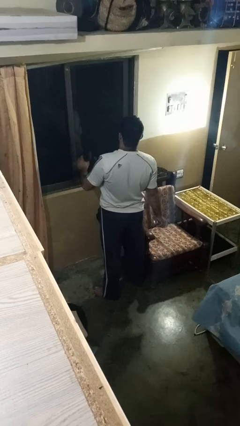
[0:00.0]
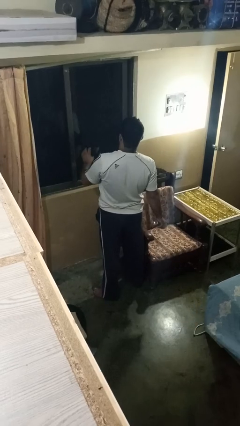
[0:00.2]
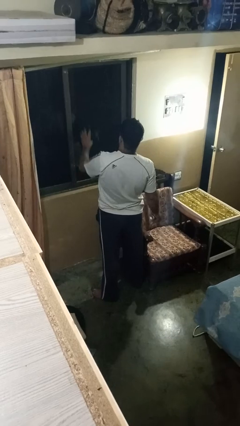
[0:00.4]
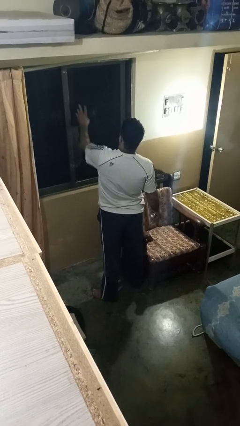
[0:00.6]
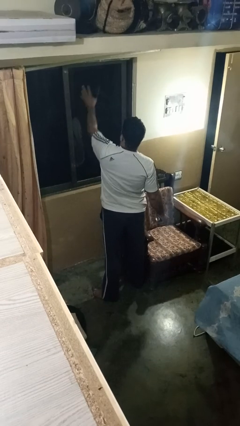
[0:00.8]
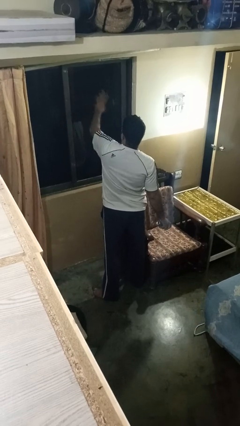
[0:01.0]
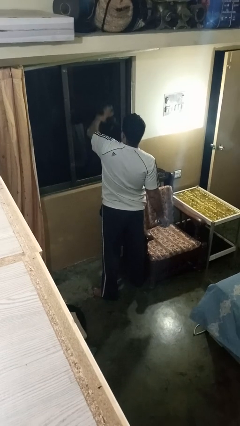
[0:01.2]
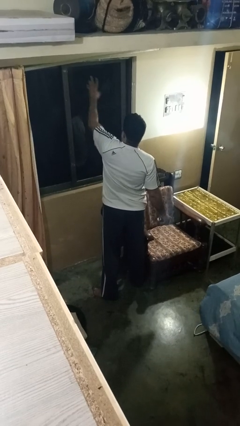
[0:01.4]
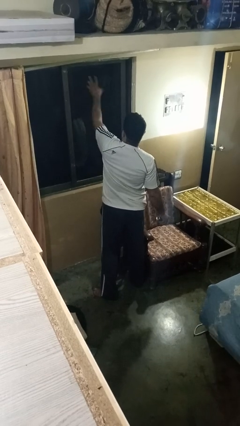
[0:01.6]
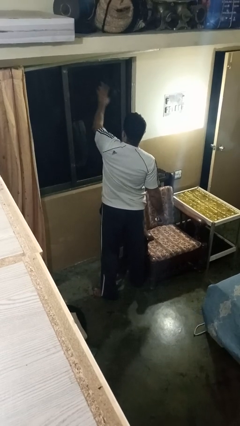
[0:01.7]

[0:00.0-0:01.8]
person washes window

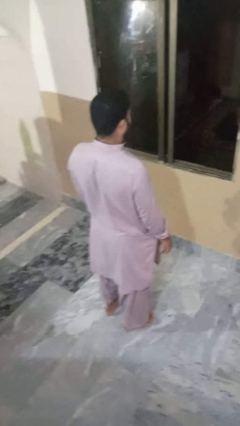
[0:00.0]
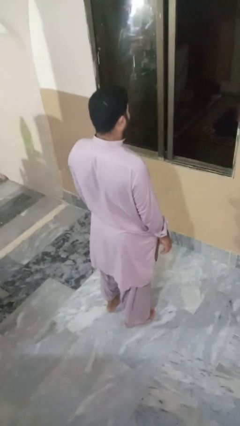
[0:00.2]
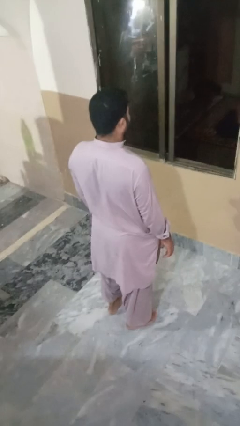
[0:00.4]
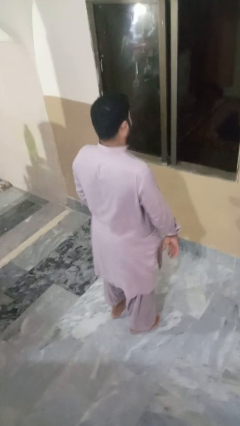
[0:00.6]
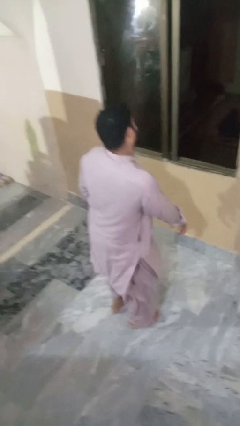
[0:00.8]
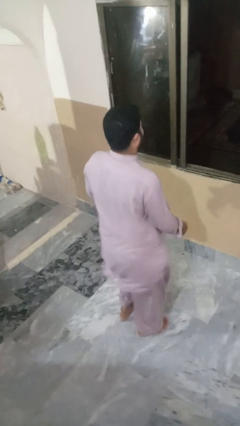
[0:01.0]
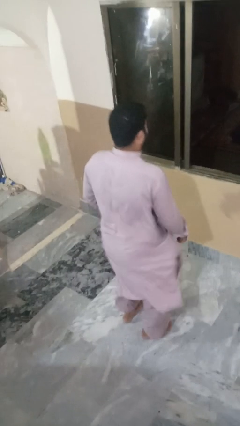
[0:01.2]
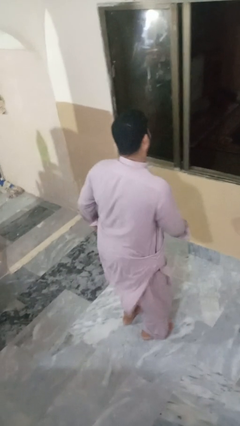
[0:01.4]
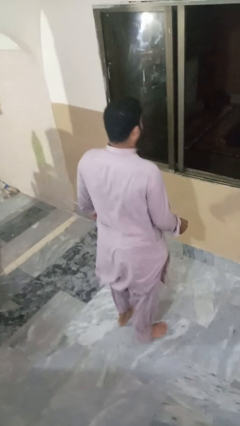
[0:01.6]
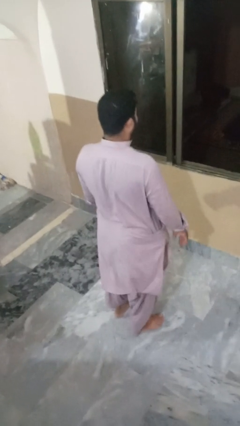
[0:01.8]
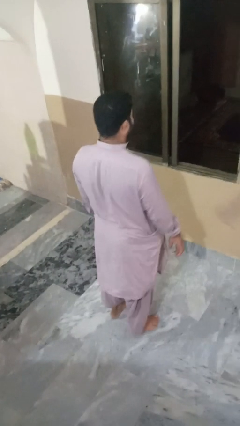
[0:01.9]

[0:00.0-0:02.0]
person wiggles hips

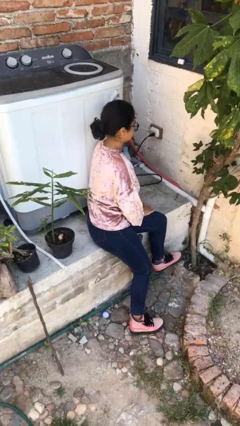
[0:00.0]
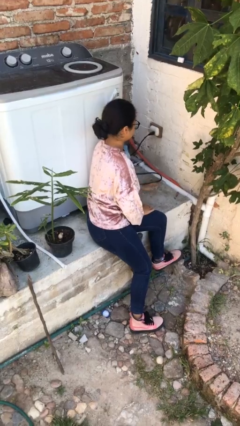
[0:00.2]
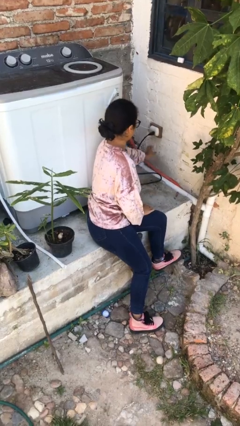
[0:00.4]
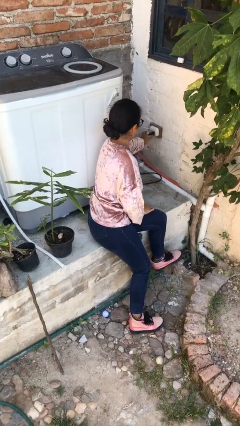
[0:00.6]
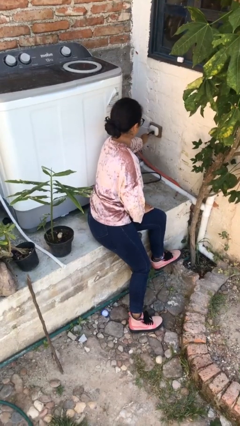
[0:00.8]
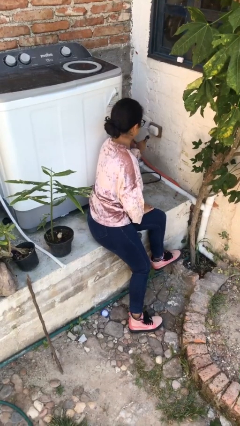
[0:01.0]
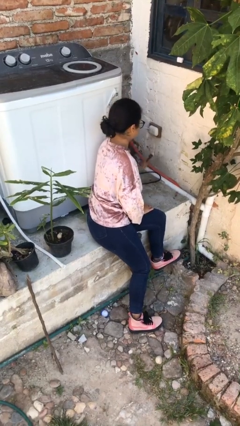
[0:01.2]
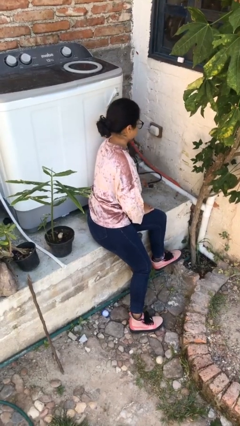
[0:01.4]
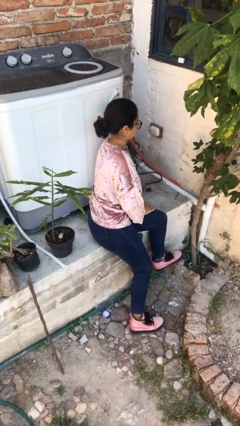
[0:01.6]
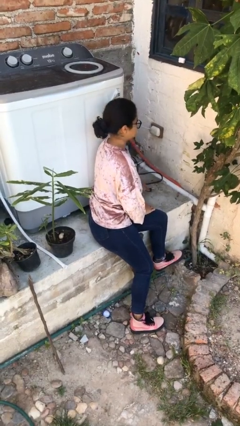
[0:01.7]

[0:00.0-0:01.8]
person unplugs from electrical socket

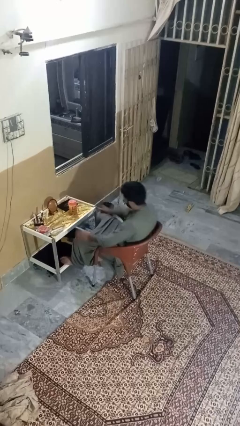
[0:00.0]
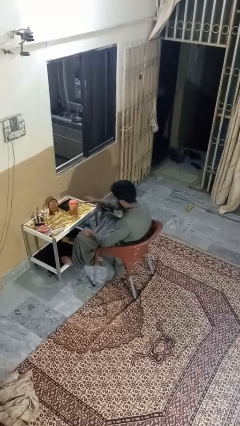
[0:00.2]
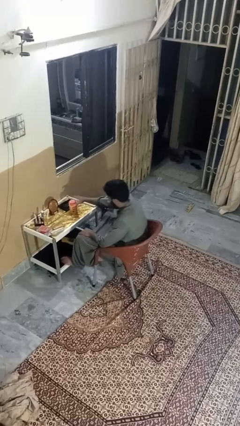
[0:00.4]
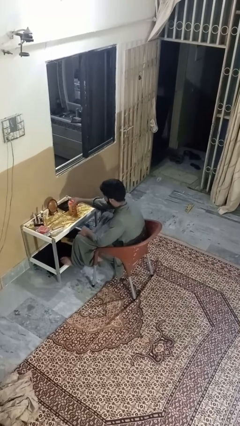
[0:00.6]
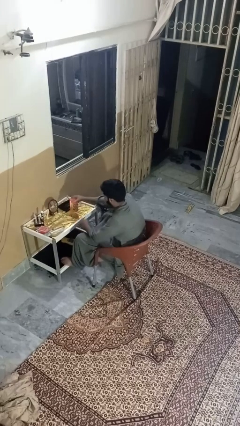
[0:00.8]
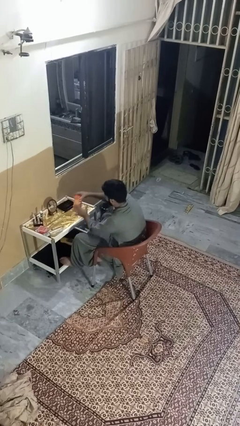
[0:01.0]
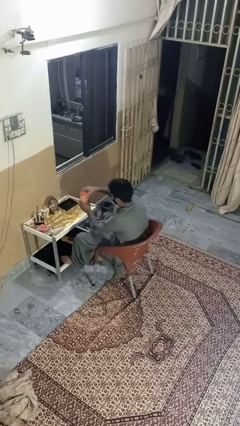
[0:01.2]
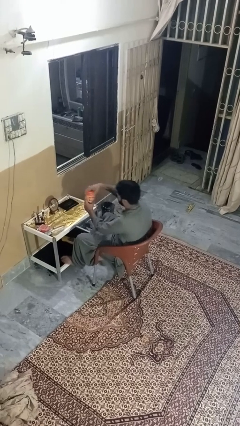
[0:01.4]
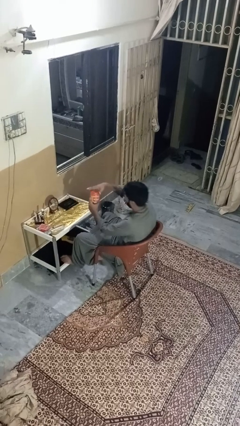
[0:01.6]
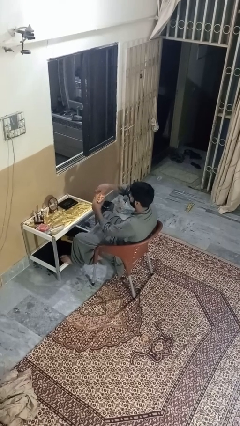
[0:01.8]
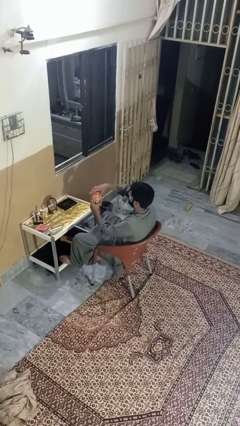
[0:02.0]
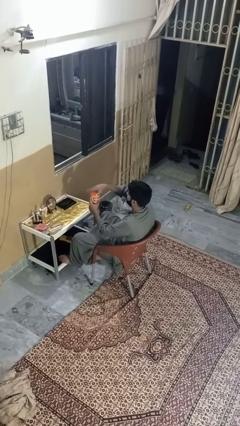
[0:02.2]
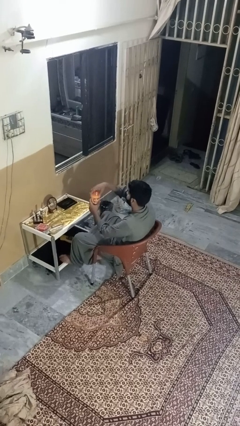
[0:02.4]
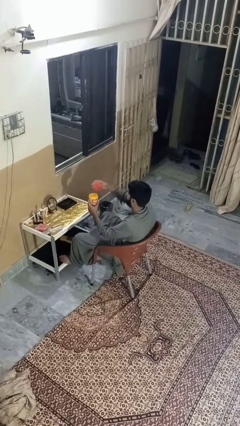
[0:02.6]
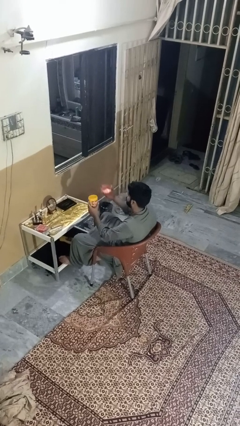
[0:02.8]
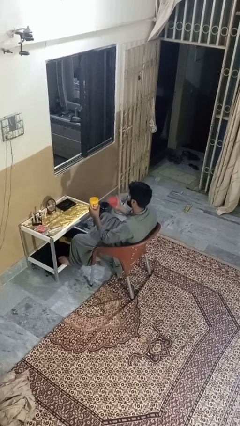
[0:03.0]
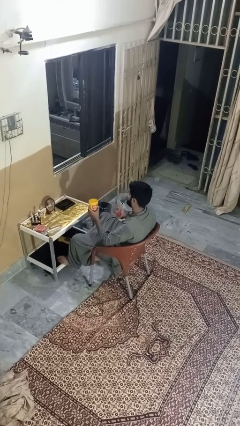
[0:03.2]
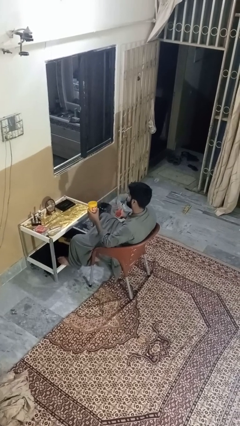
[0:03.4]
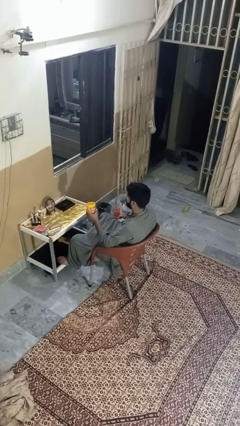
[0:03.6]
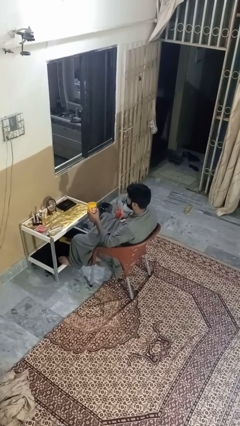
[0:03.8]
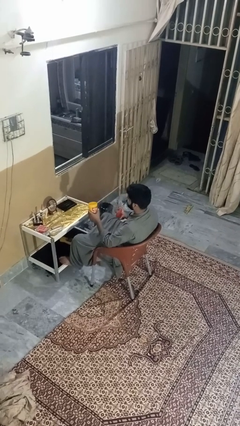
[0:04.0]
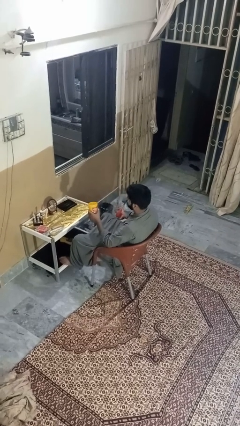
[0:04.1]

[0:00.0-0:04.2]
person opens jar

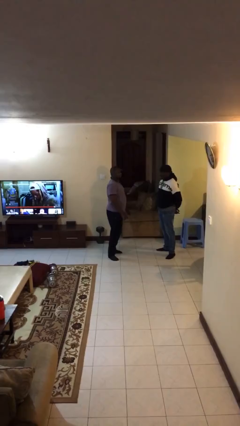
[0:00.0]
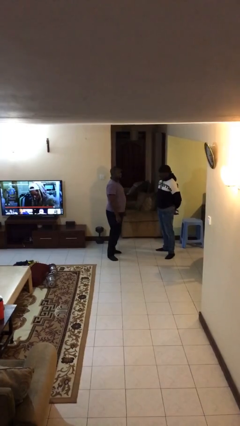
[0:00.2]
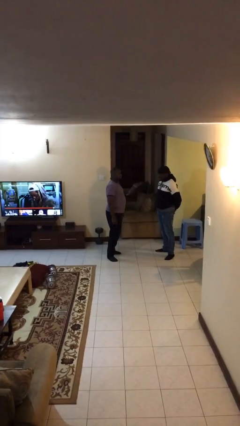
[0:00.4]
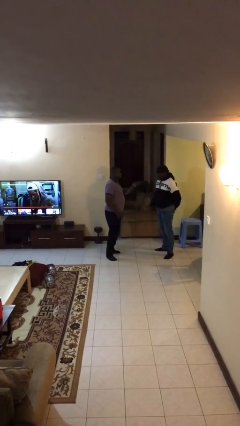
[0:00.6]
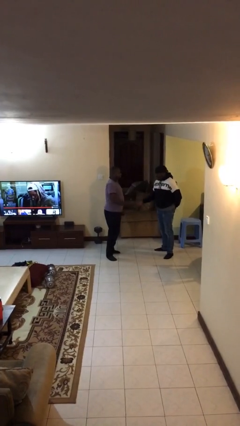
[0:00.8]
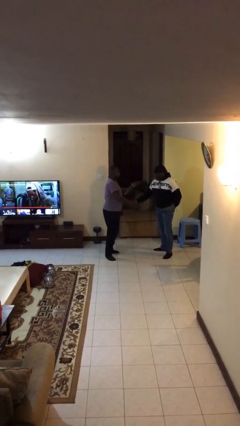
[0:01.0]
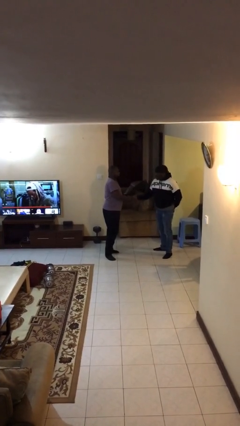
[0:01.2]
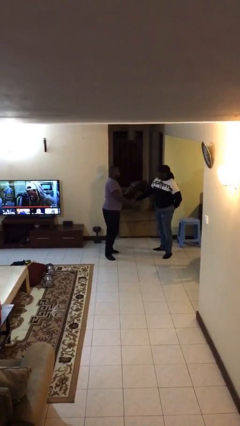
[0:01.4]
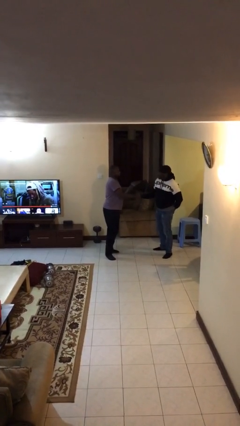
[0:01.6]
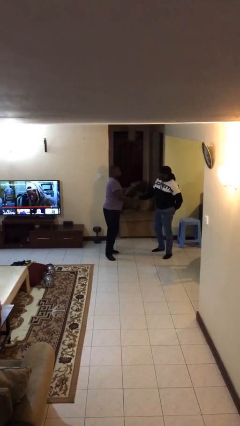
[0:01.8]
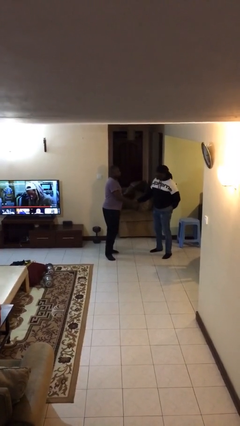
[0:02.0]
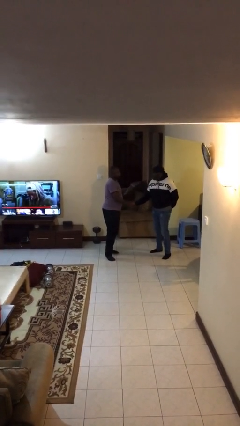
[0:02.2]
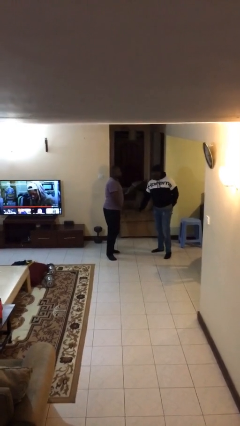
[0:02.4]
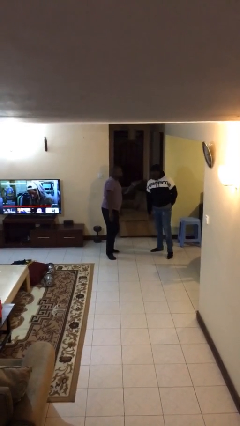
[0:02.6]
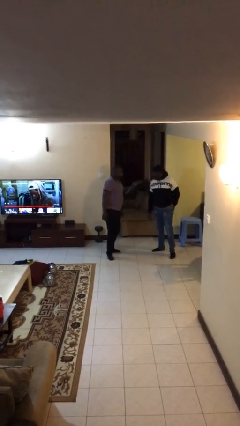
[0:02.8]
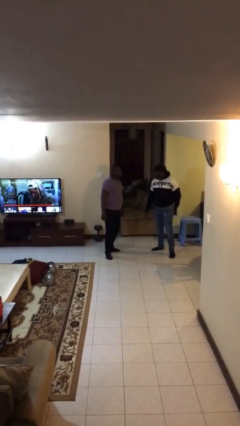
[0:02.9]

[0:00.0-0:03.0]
person shakes hand

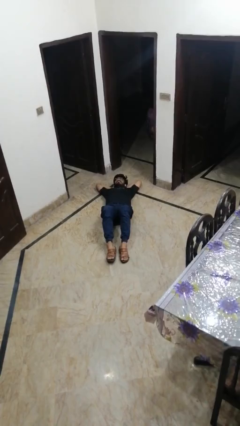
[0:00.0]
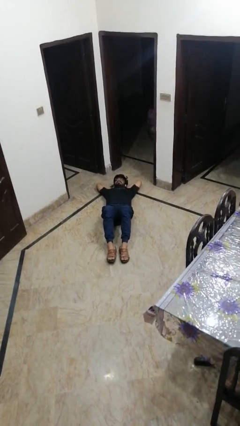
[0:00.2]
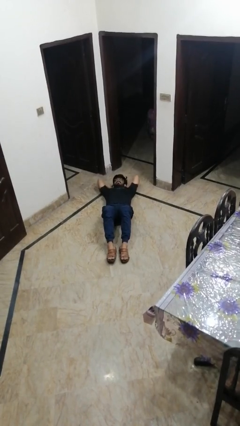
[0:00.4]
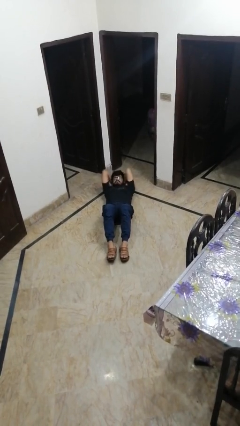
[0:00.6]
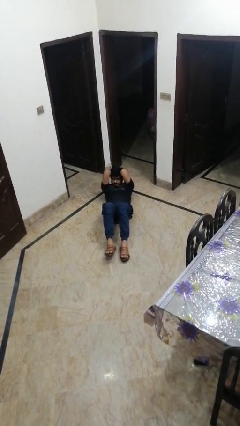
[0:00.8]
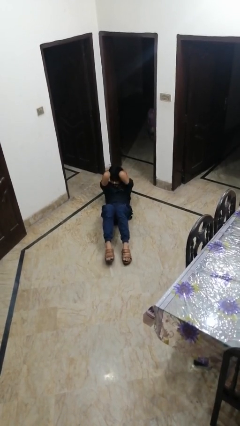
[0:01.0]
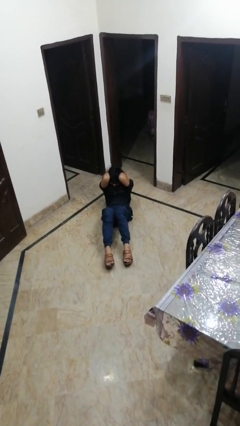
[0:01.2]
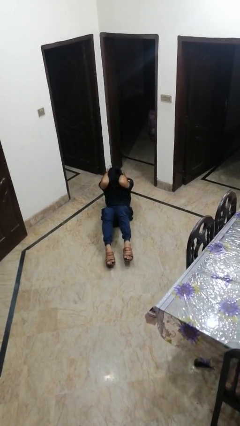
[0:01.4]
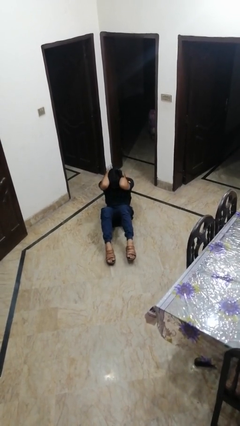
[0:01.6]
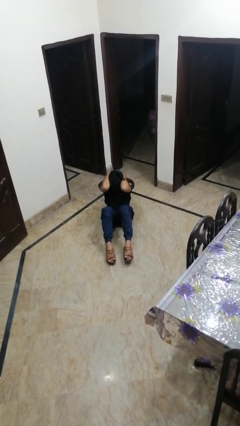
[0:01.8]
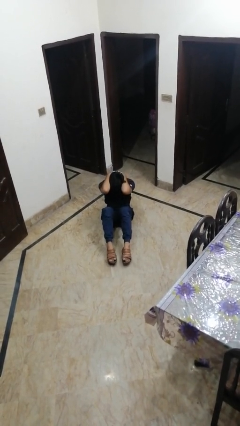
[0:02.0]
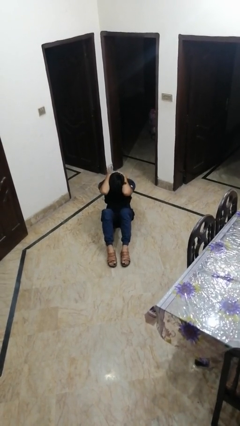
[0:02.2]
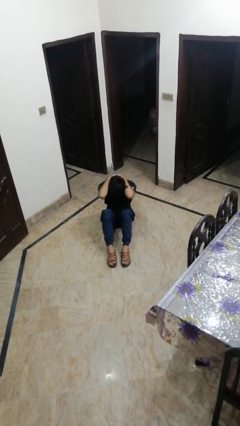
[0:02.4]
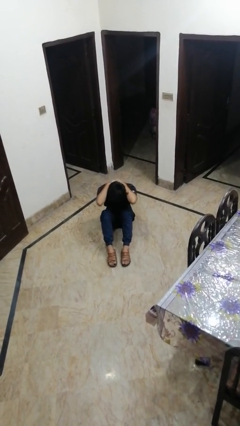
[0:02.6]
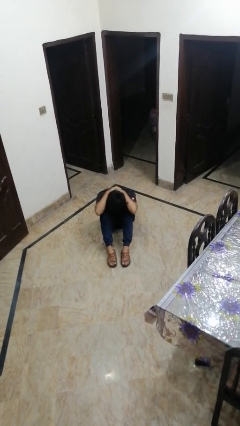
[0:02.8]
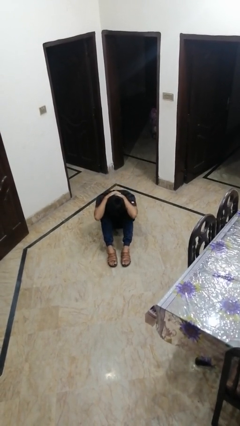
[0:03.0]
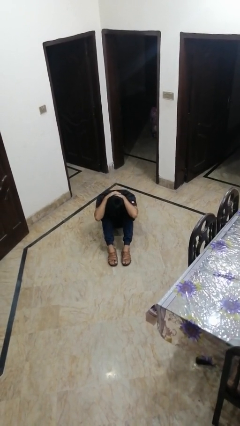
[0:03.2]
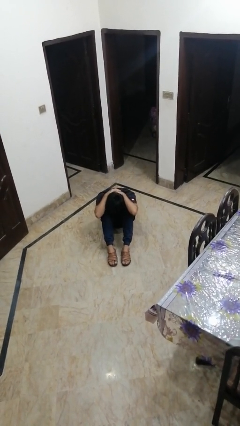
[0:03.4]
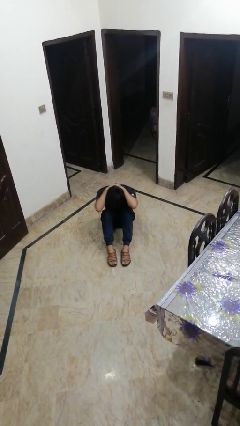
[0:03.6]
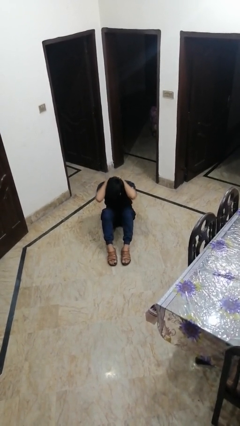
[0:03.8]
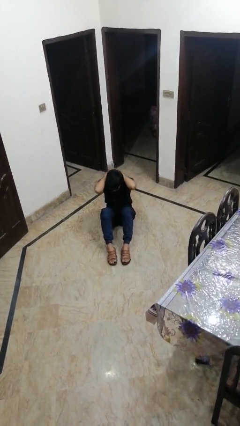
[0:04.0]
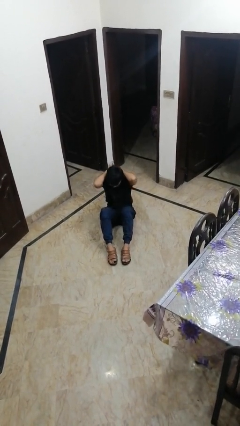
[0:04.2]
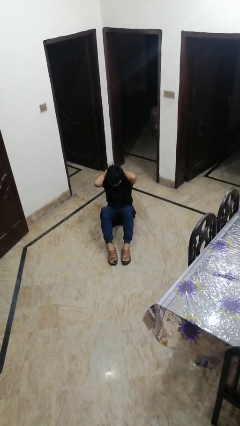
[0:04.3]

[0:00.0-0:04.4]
person exercises with situp
